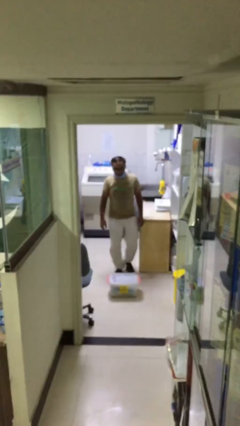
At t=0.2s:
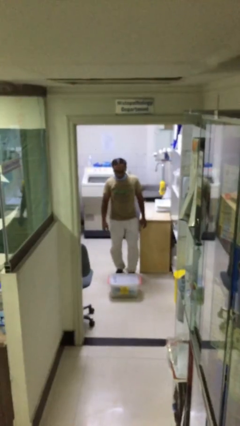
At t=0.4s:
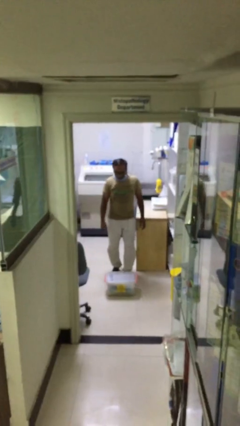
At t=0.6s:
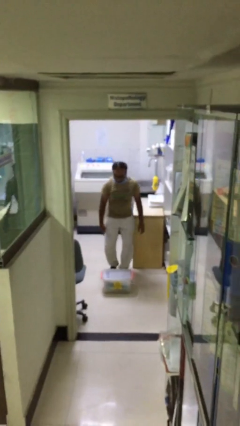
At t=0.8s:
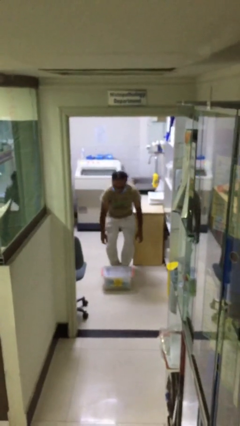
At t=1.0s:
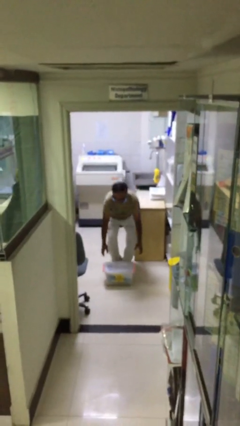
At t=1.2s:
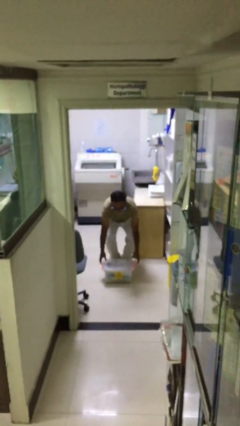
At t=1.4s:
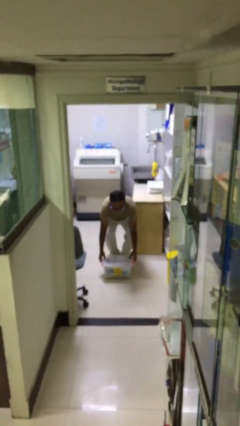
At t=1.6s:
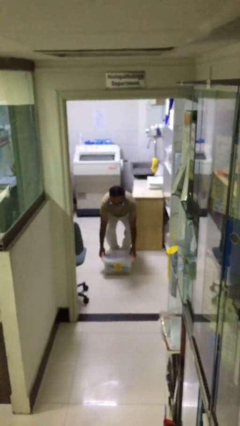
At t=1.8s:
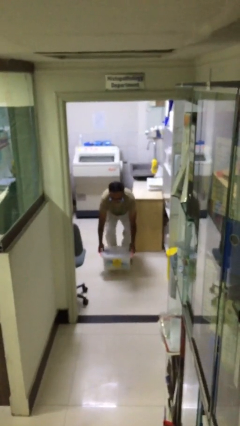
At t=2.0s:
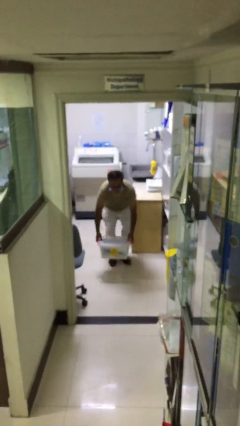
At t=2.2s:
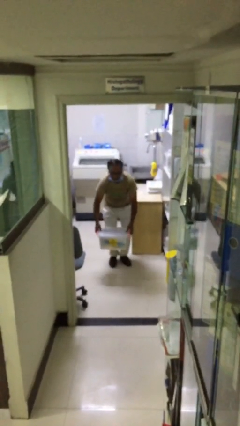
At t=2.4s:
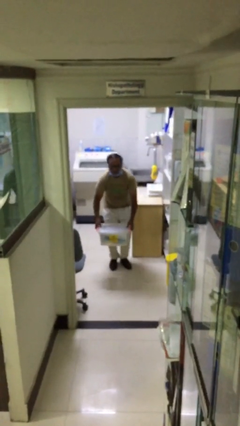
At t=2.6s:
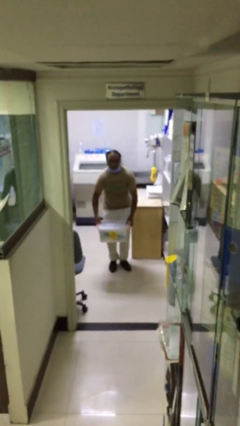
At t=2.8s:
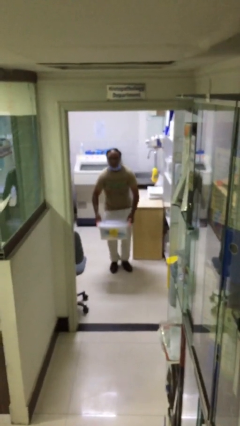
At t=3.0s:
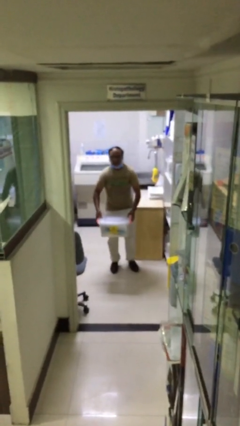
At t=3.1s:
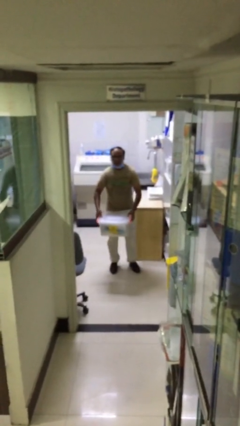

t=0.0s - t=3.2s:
person picks up object from floor

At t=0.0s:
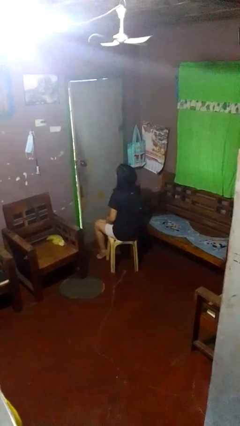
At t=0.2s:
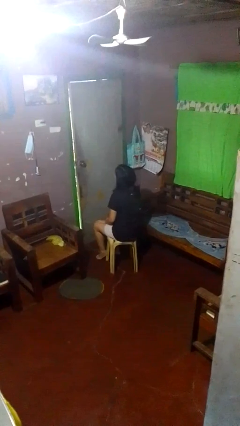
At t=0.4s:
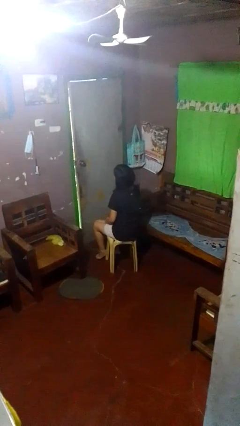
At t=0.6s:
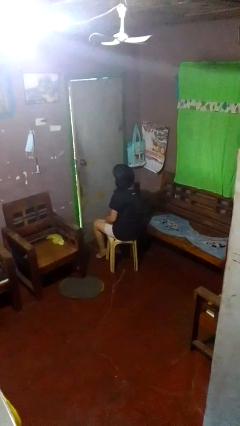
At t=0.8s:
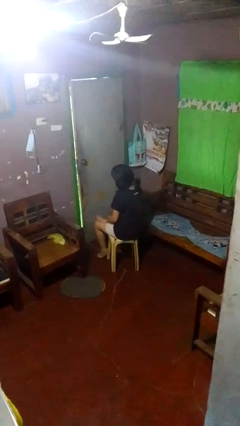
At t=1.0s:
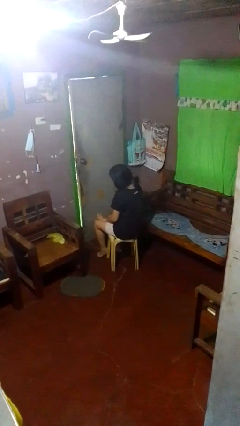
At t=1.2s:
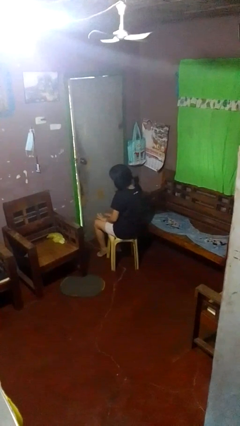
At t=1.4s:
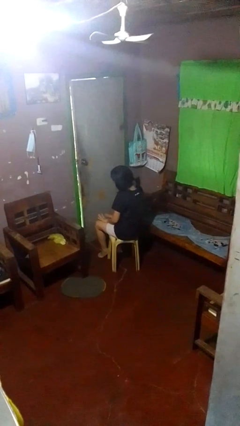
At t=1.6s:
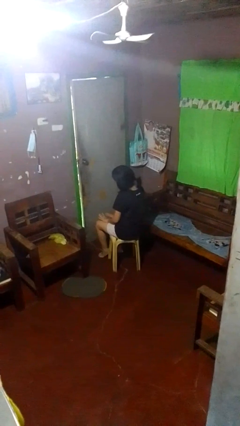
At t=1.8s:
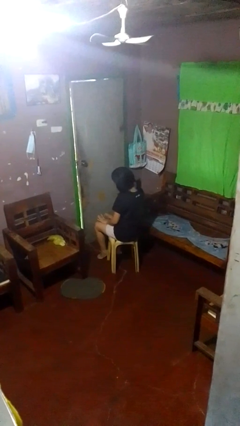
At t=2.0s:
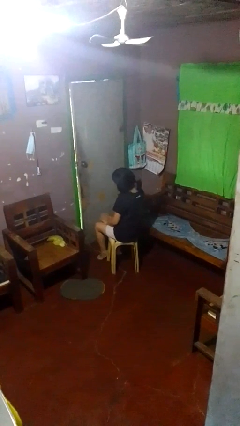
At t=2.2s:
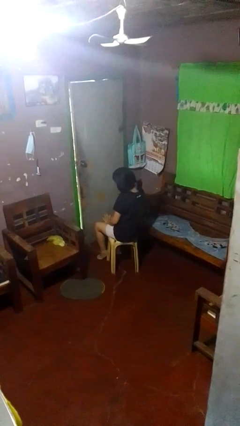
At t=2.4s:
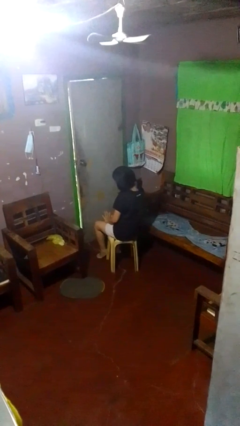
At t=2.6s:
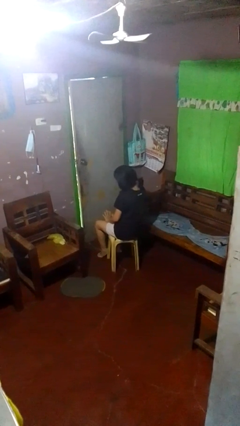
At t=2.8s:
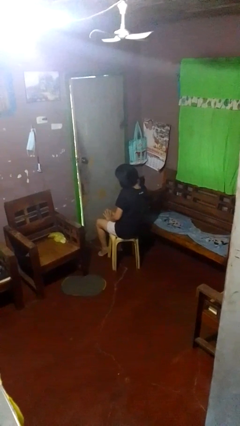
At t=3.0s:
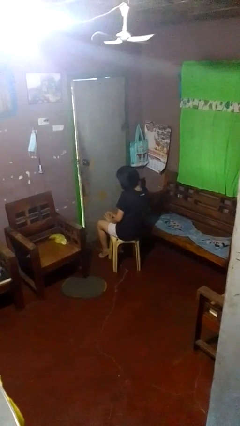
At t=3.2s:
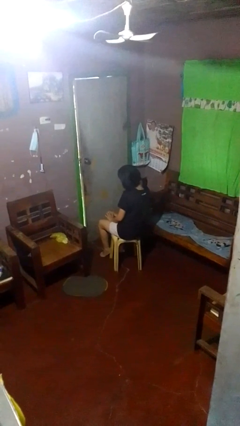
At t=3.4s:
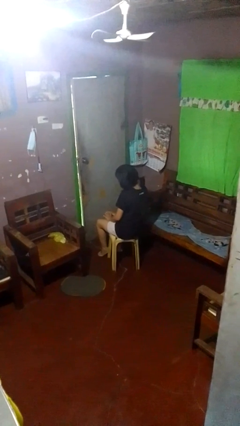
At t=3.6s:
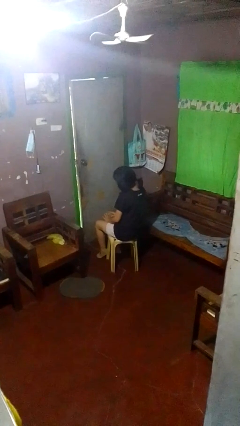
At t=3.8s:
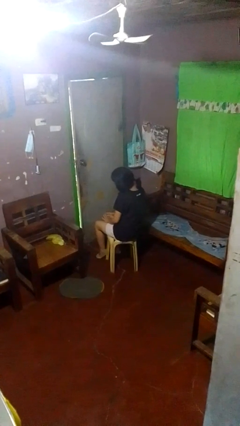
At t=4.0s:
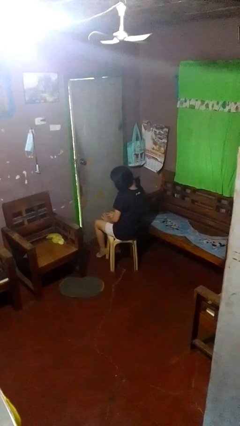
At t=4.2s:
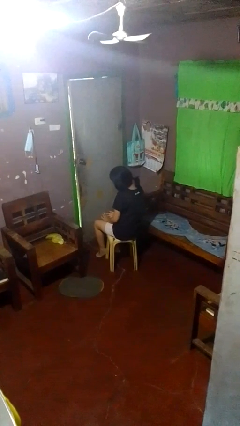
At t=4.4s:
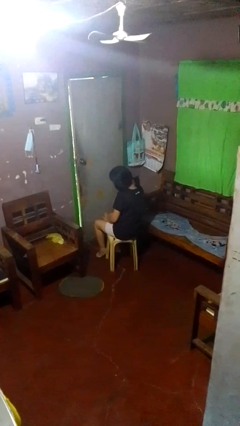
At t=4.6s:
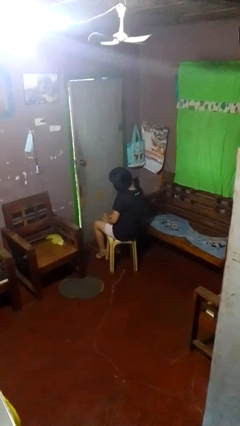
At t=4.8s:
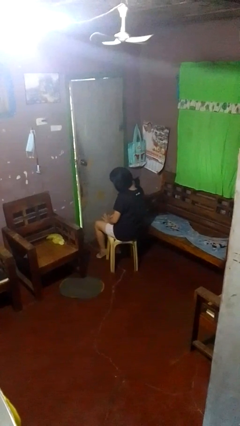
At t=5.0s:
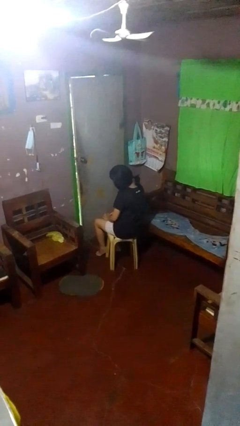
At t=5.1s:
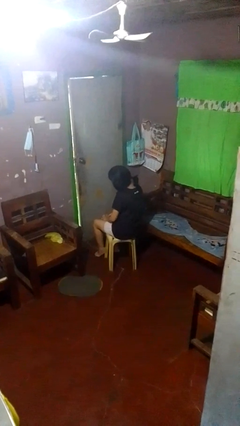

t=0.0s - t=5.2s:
person looks at hands in lap

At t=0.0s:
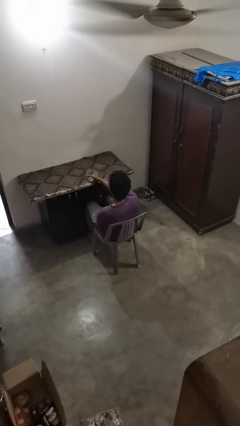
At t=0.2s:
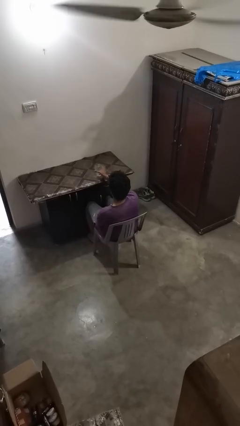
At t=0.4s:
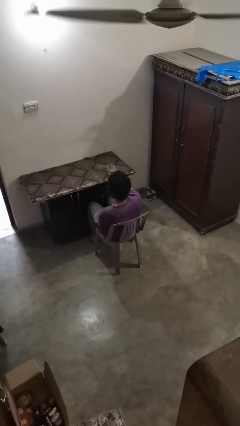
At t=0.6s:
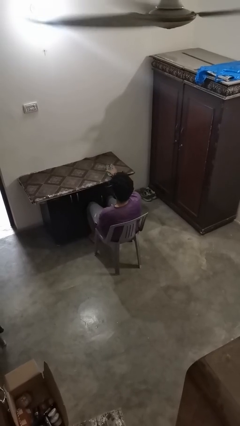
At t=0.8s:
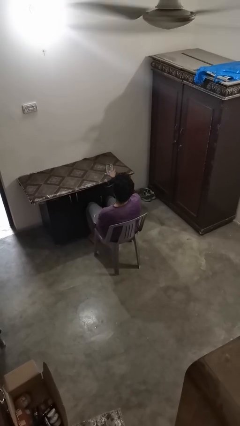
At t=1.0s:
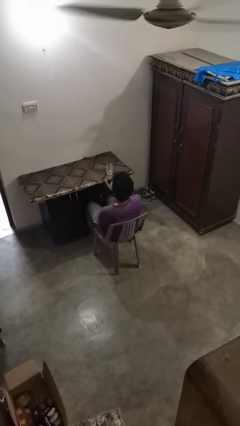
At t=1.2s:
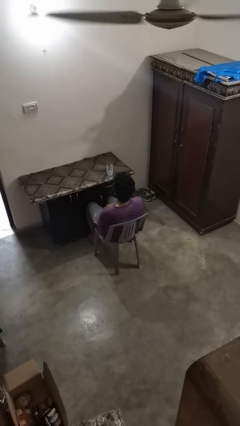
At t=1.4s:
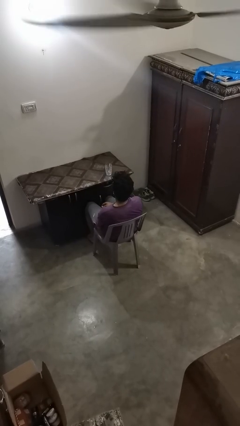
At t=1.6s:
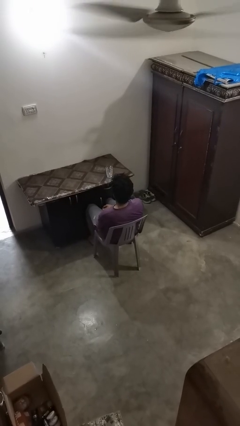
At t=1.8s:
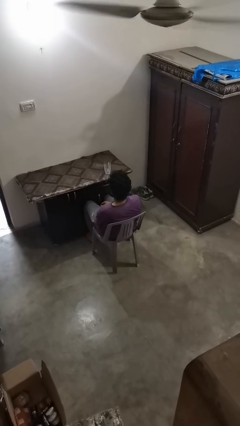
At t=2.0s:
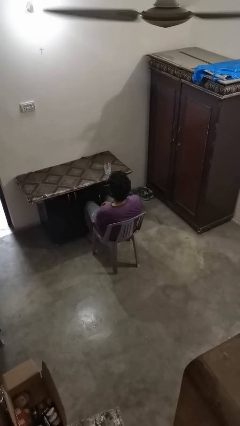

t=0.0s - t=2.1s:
person sets upright glass

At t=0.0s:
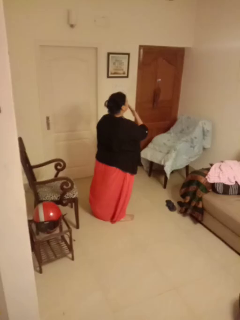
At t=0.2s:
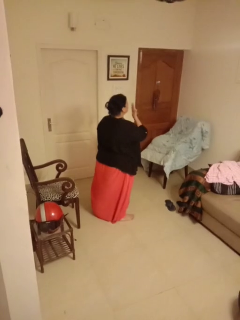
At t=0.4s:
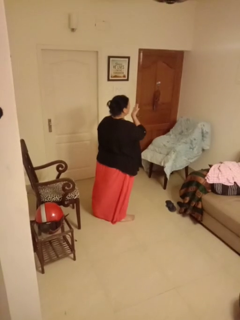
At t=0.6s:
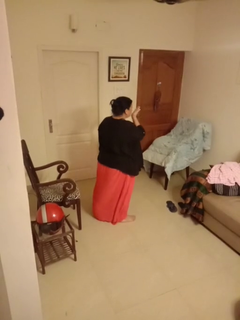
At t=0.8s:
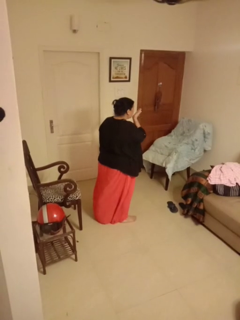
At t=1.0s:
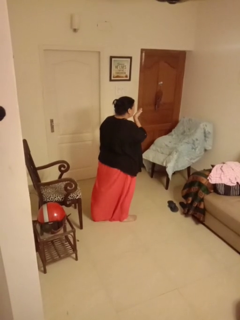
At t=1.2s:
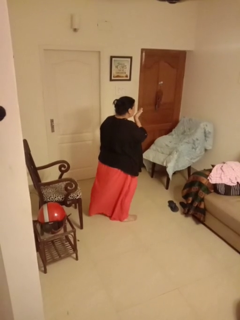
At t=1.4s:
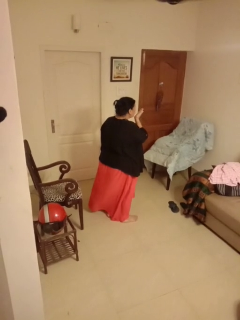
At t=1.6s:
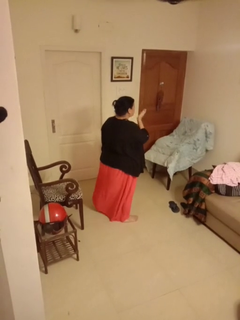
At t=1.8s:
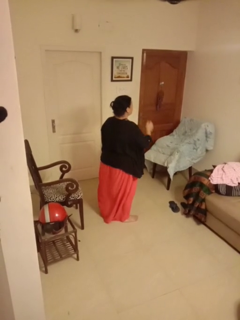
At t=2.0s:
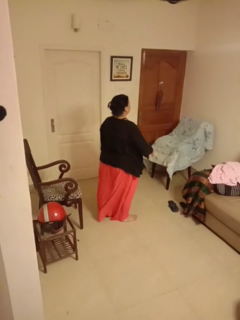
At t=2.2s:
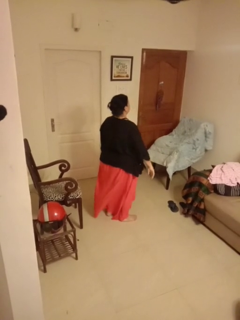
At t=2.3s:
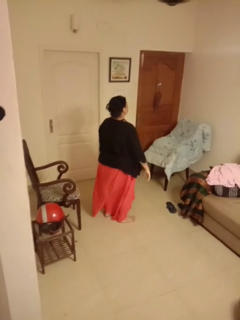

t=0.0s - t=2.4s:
person gestures blow kiss

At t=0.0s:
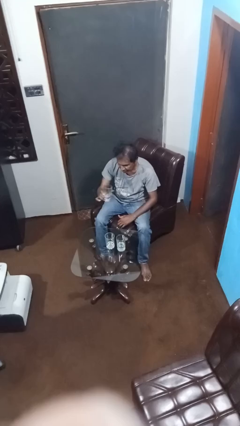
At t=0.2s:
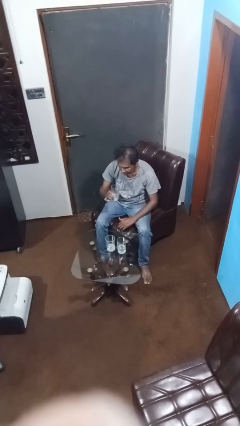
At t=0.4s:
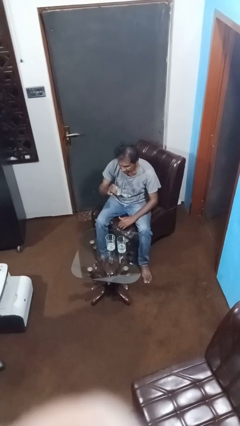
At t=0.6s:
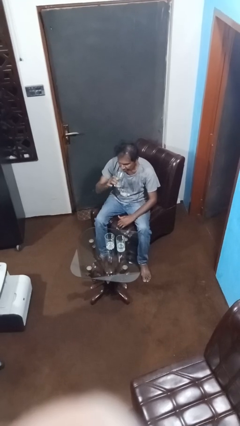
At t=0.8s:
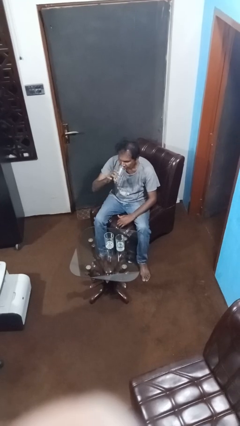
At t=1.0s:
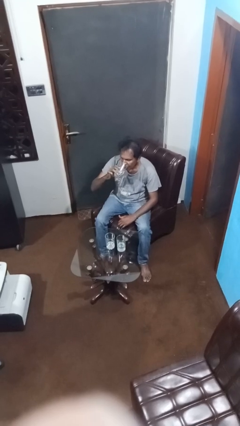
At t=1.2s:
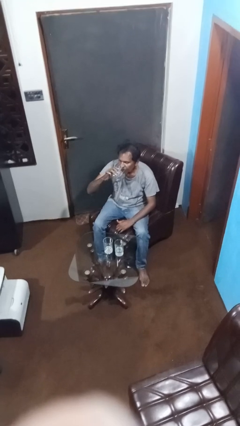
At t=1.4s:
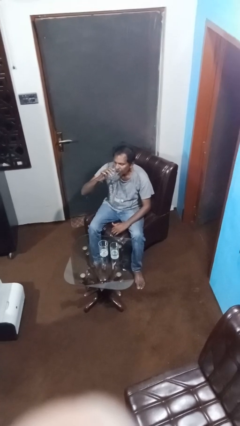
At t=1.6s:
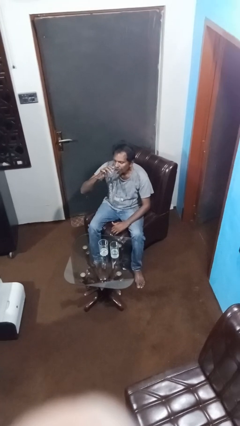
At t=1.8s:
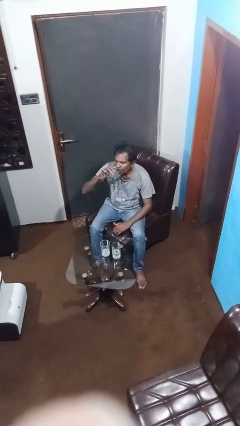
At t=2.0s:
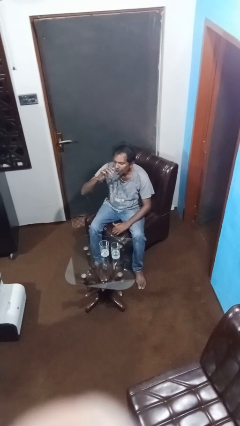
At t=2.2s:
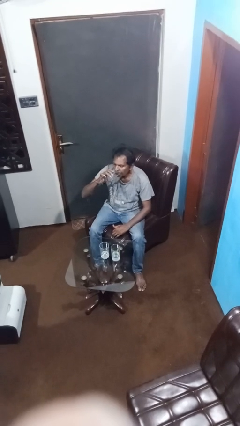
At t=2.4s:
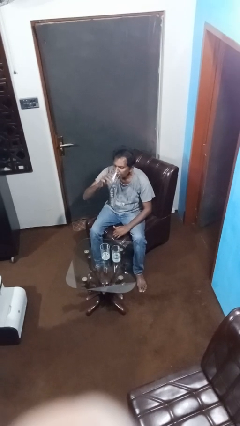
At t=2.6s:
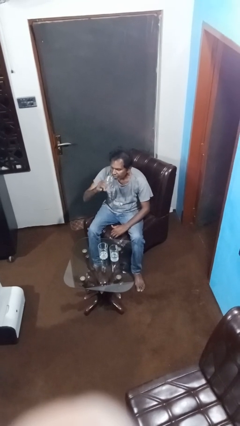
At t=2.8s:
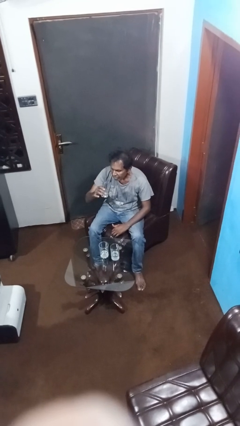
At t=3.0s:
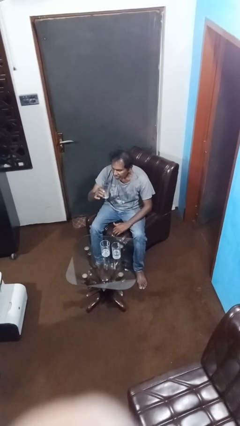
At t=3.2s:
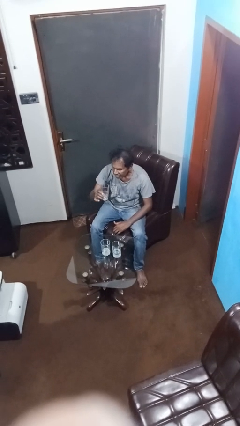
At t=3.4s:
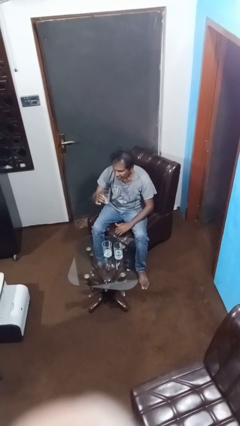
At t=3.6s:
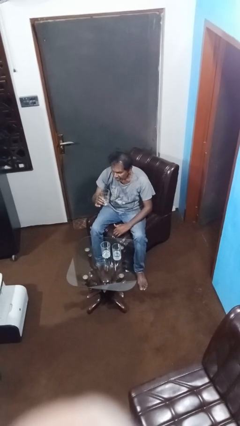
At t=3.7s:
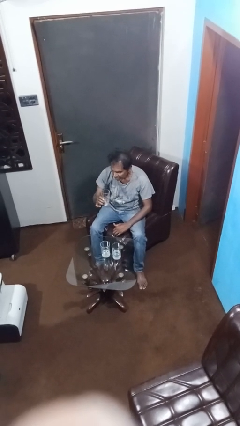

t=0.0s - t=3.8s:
person drinks from shotglass

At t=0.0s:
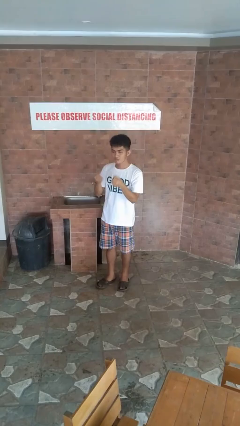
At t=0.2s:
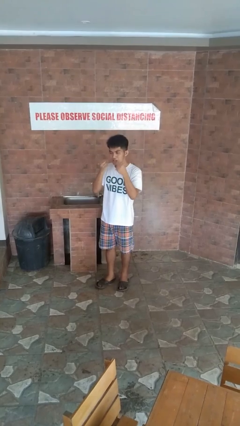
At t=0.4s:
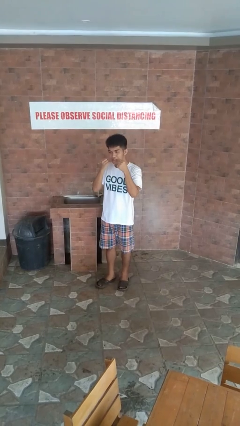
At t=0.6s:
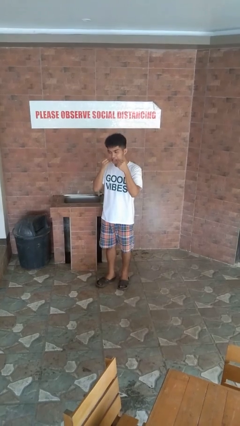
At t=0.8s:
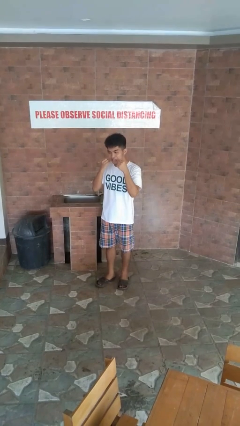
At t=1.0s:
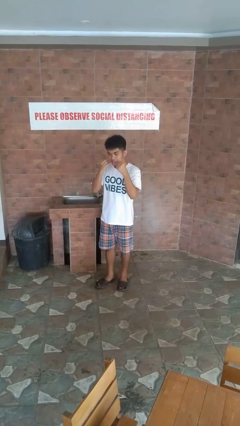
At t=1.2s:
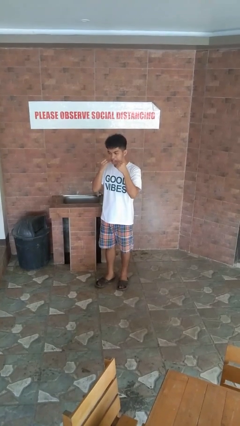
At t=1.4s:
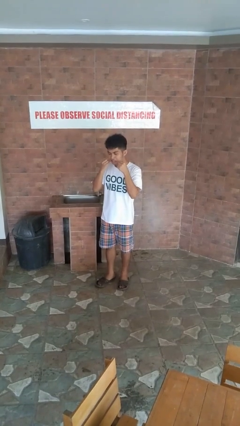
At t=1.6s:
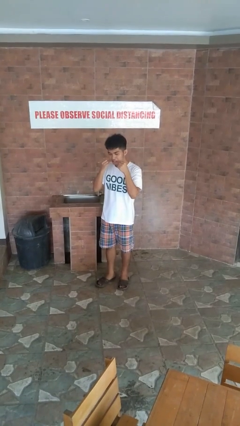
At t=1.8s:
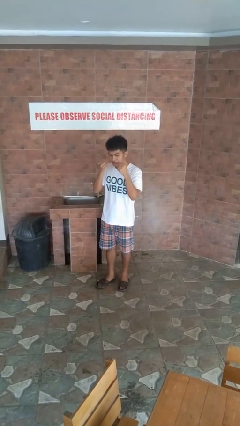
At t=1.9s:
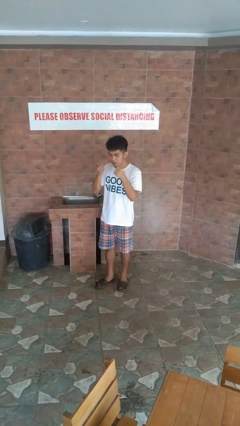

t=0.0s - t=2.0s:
person flosses
